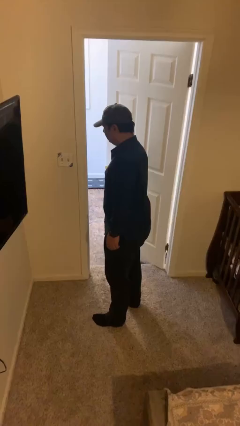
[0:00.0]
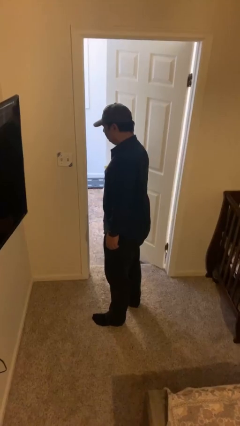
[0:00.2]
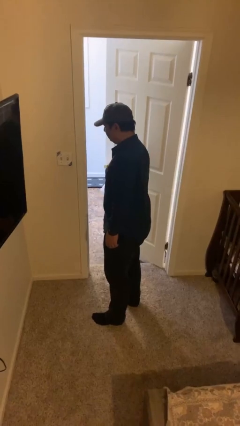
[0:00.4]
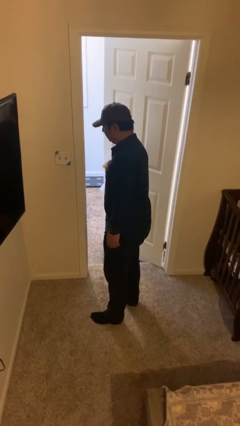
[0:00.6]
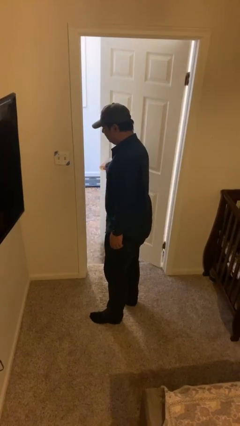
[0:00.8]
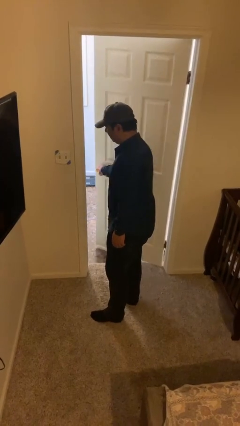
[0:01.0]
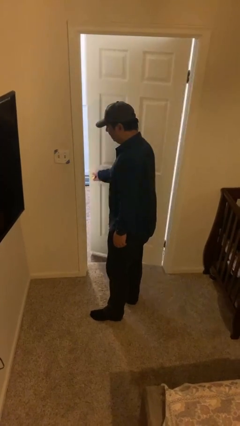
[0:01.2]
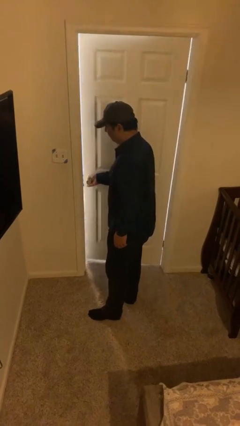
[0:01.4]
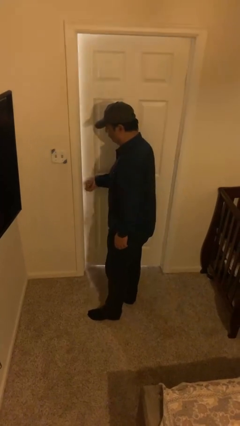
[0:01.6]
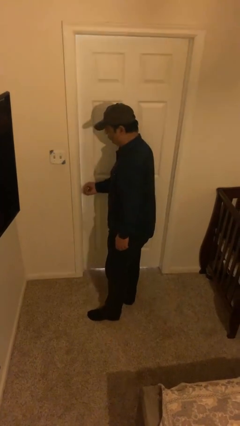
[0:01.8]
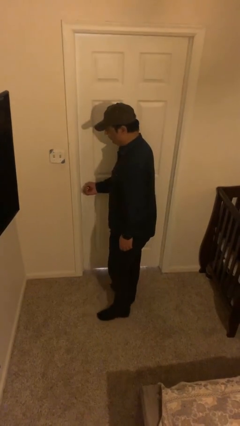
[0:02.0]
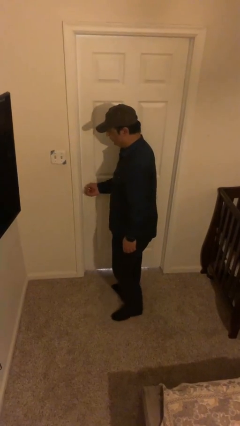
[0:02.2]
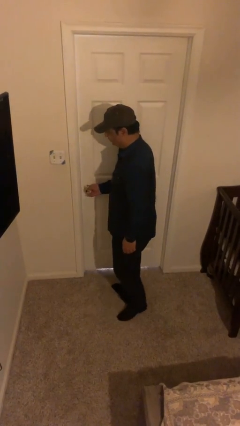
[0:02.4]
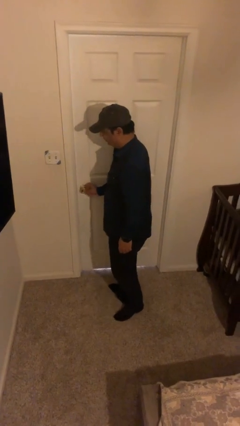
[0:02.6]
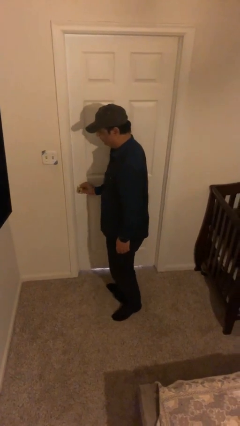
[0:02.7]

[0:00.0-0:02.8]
person closes facility door

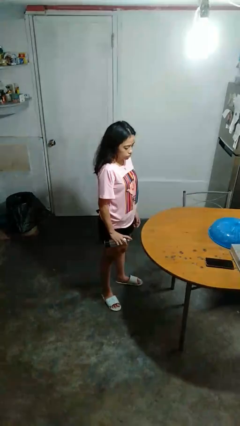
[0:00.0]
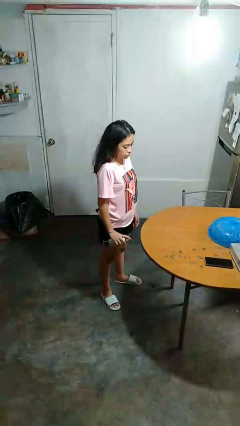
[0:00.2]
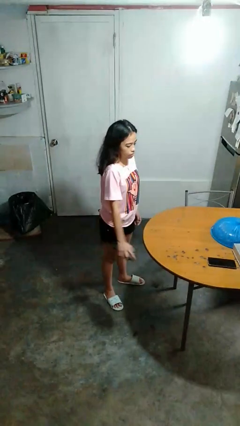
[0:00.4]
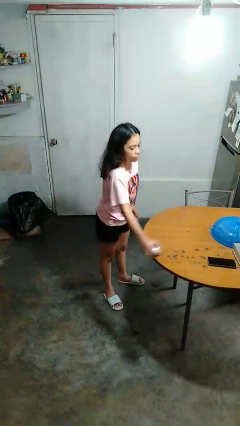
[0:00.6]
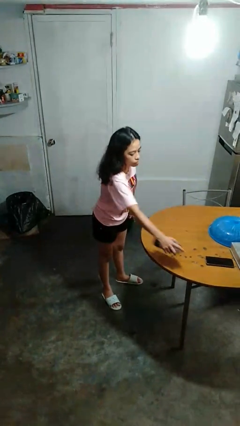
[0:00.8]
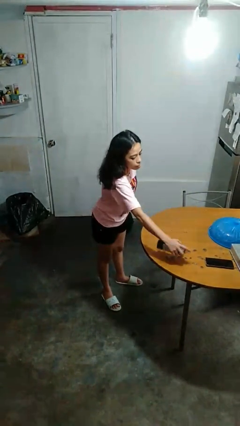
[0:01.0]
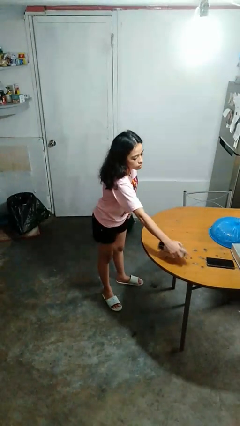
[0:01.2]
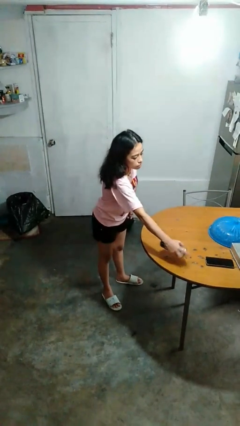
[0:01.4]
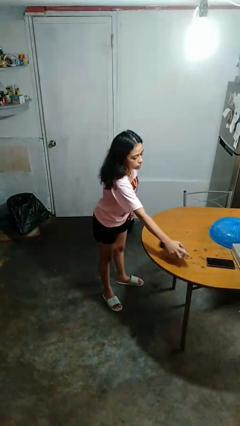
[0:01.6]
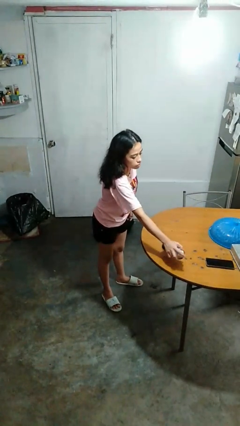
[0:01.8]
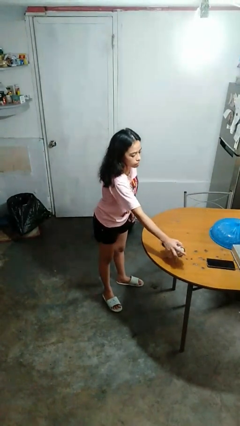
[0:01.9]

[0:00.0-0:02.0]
person sprays from bottle

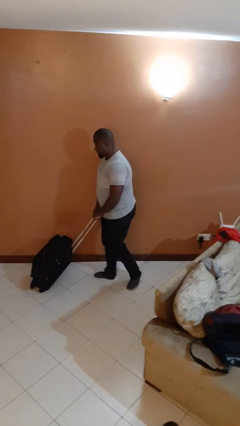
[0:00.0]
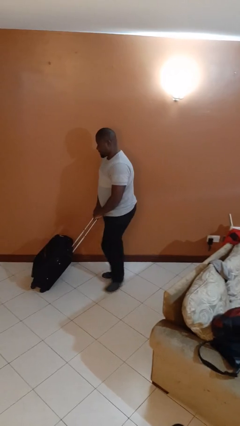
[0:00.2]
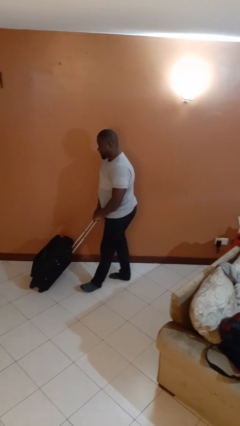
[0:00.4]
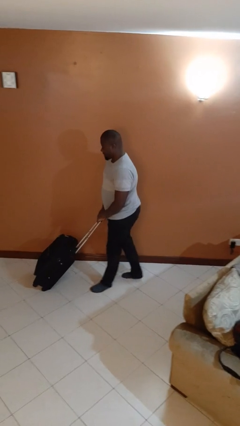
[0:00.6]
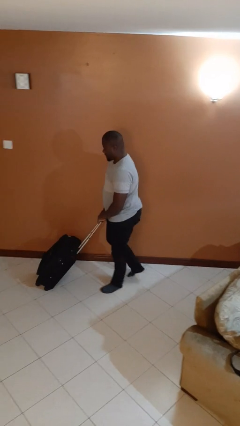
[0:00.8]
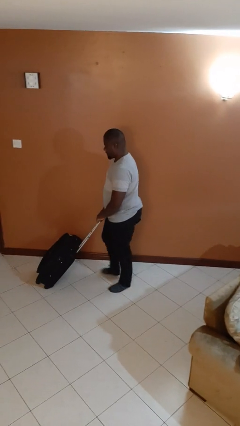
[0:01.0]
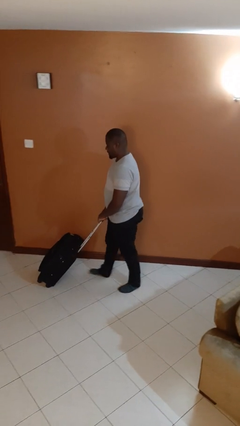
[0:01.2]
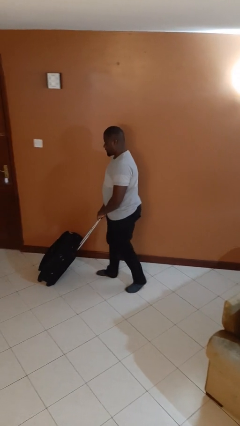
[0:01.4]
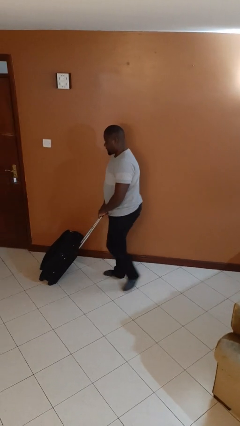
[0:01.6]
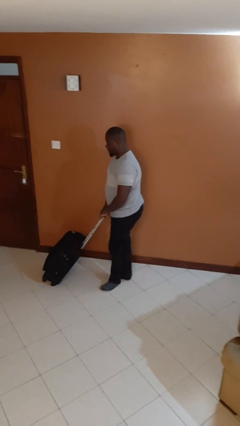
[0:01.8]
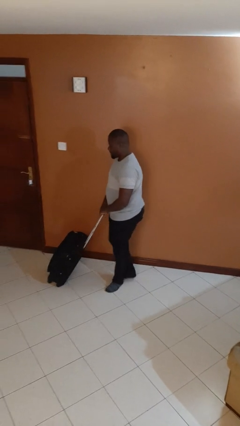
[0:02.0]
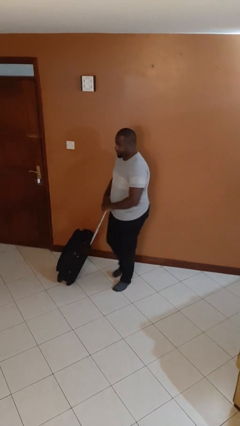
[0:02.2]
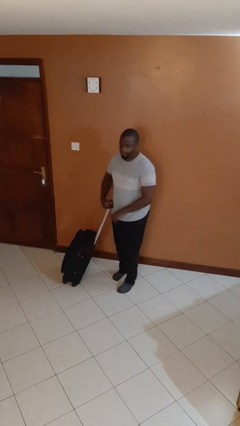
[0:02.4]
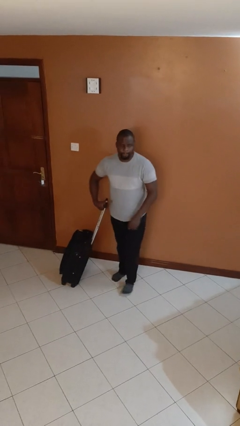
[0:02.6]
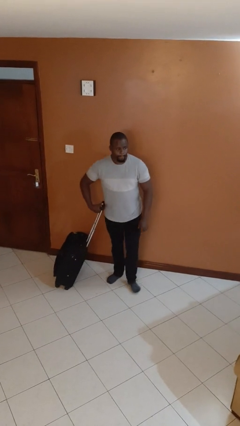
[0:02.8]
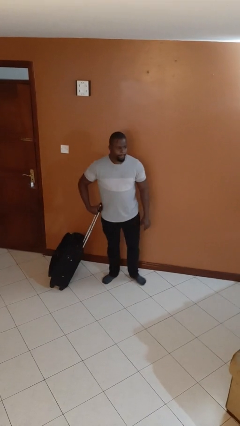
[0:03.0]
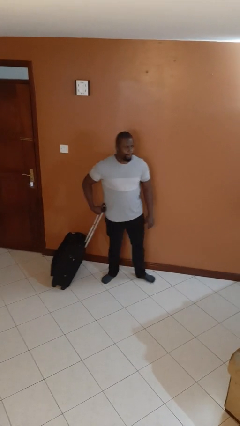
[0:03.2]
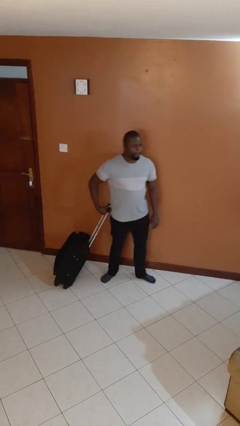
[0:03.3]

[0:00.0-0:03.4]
person pushes wheeled cart

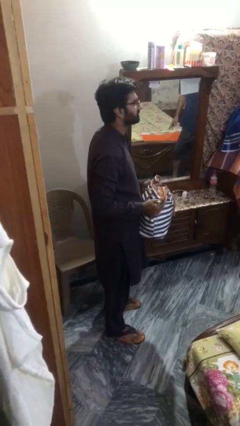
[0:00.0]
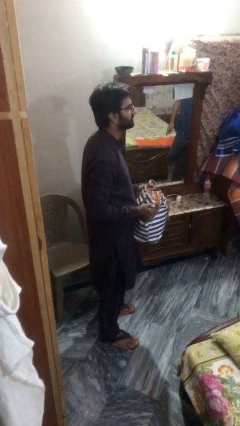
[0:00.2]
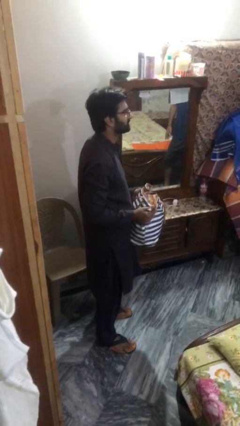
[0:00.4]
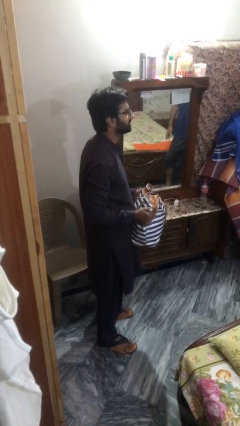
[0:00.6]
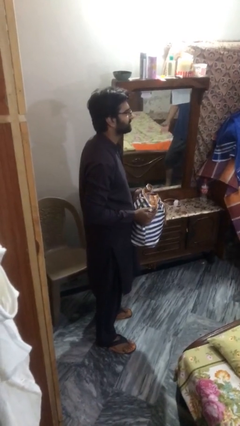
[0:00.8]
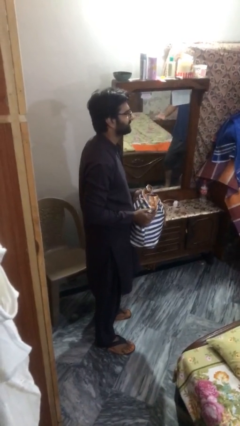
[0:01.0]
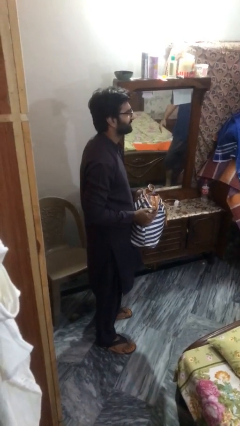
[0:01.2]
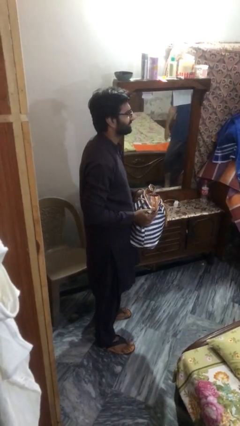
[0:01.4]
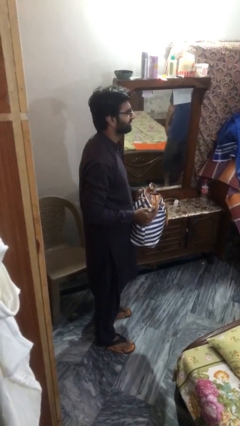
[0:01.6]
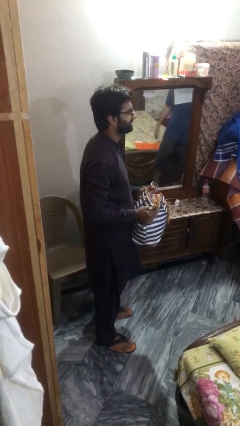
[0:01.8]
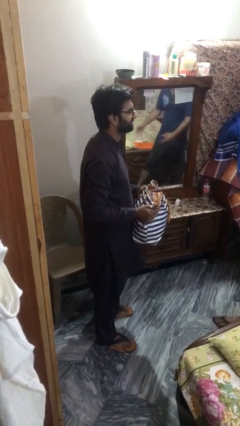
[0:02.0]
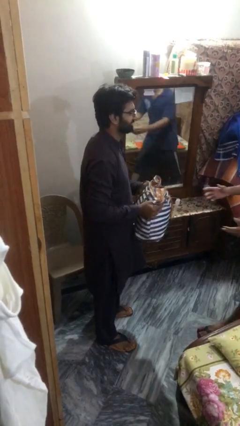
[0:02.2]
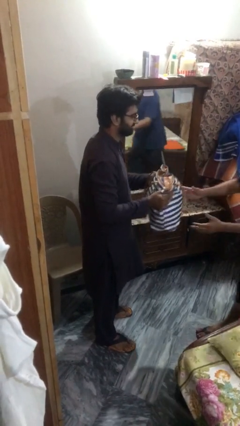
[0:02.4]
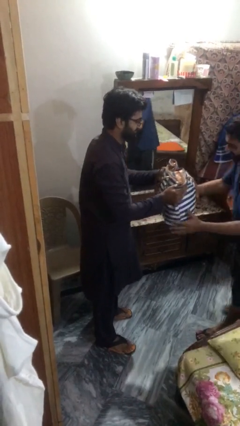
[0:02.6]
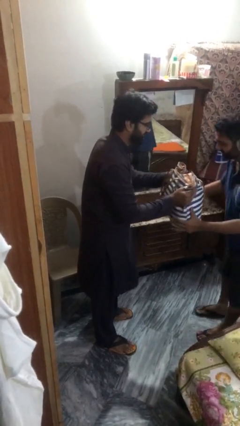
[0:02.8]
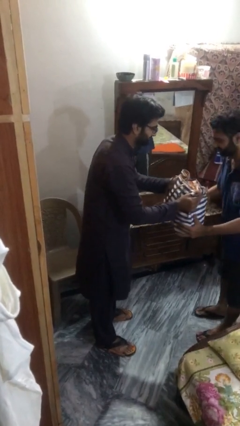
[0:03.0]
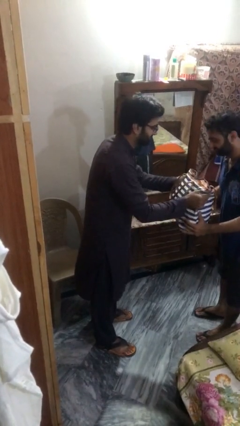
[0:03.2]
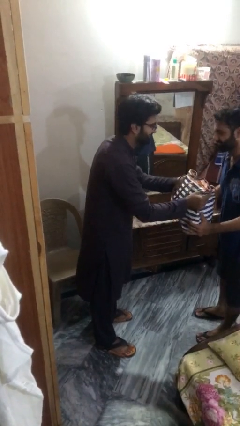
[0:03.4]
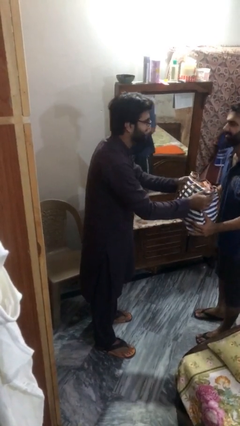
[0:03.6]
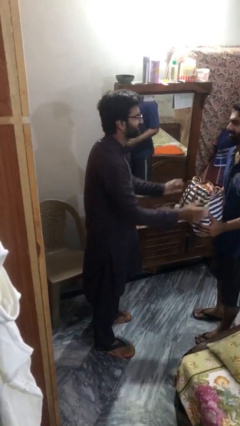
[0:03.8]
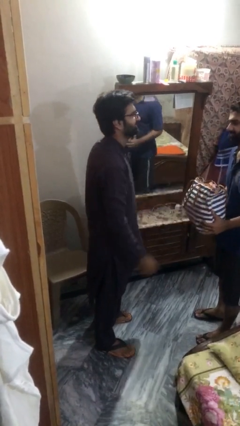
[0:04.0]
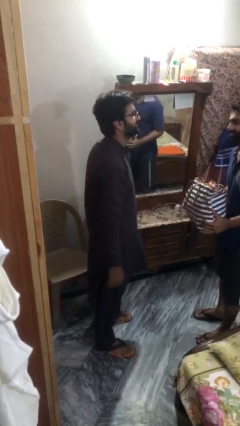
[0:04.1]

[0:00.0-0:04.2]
person transfers object to person

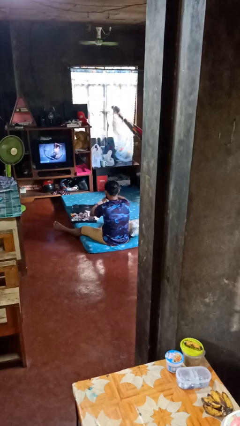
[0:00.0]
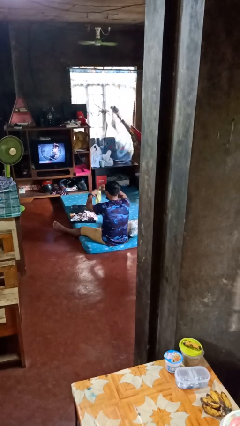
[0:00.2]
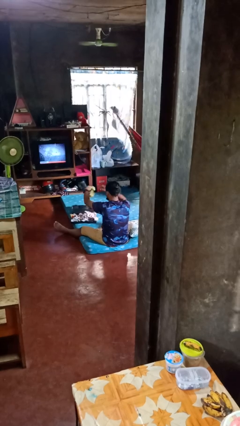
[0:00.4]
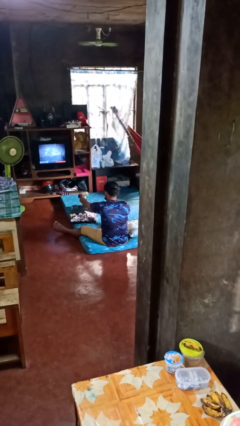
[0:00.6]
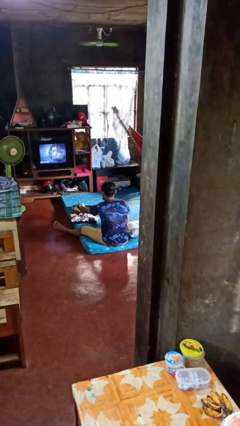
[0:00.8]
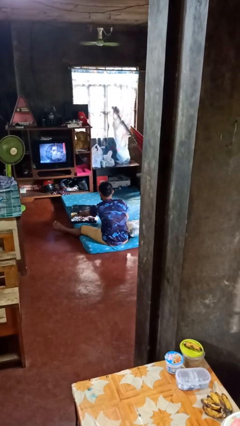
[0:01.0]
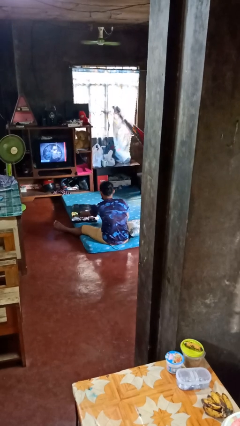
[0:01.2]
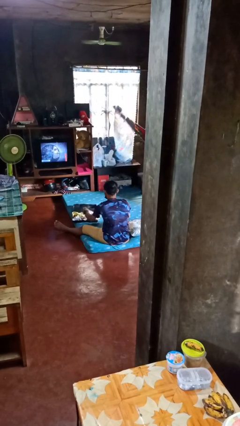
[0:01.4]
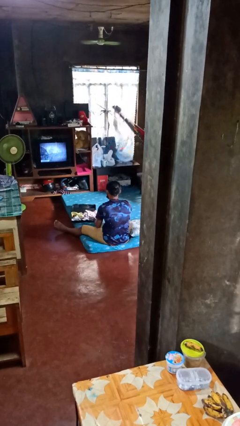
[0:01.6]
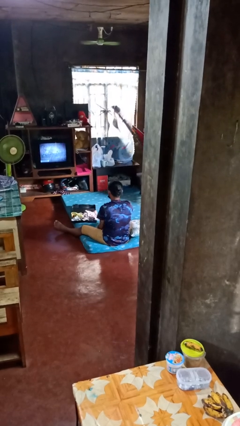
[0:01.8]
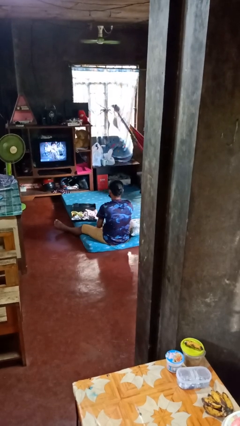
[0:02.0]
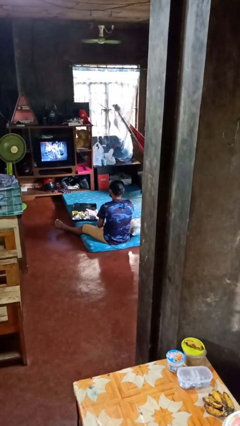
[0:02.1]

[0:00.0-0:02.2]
person loads clothes into suitcase

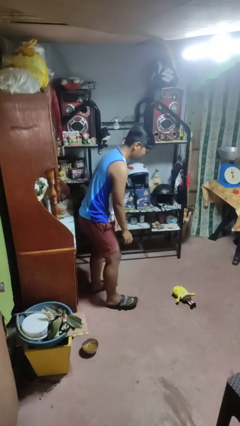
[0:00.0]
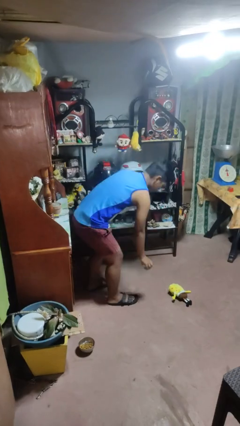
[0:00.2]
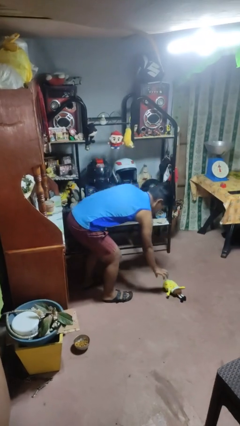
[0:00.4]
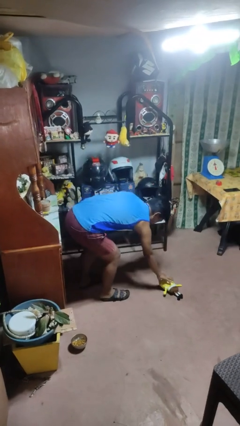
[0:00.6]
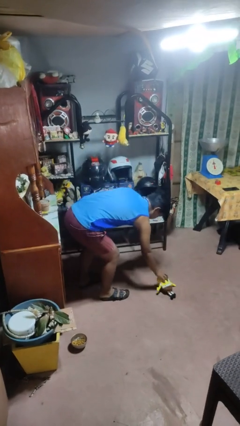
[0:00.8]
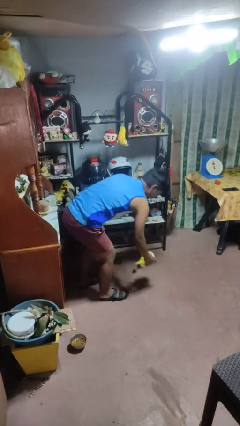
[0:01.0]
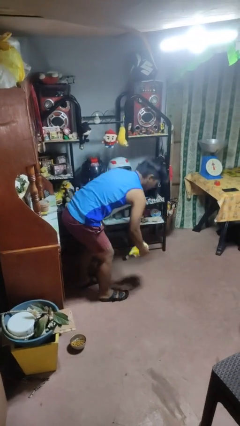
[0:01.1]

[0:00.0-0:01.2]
person picks up object from floor

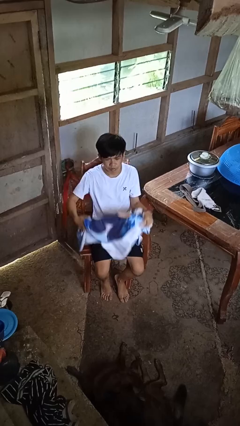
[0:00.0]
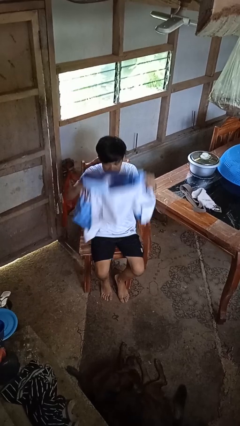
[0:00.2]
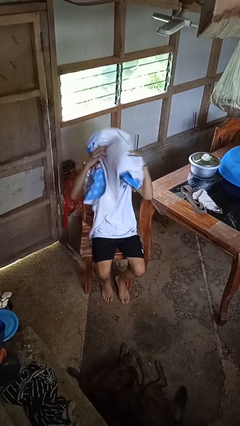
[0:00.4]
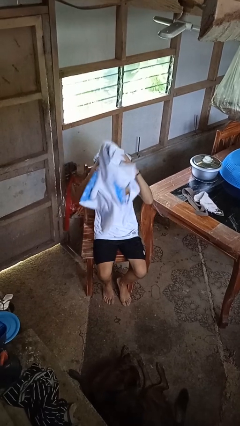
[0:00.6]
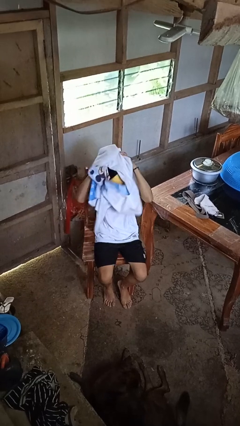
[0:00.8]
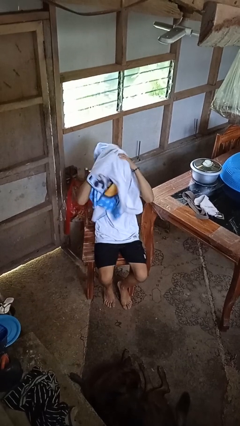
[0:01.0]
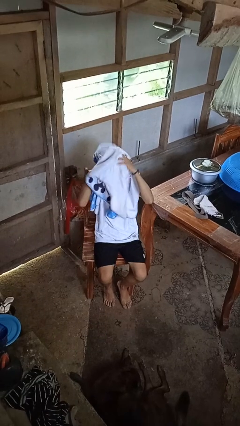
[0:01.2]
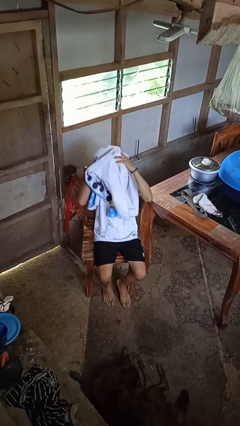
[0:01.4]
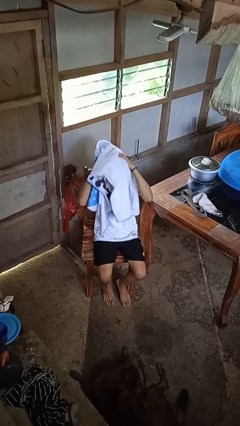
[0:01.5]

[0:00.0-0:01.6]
person dries hair with towel
